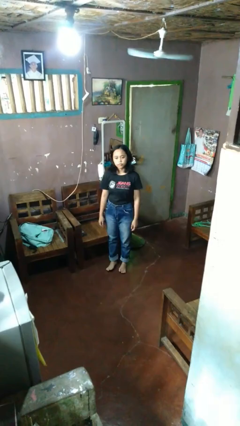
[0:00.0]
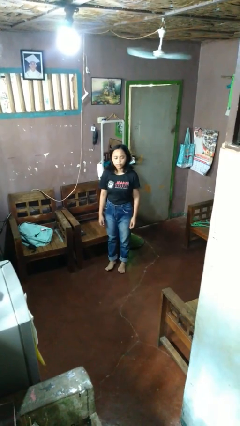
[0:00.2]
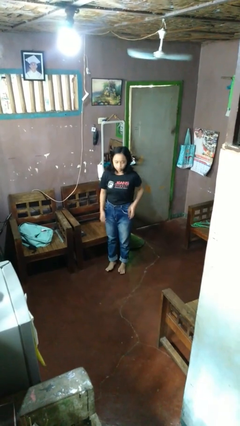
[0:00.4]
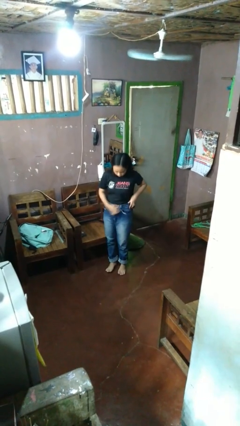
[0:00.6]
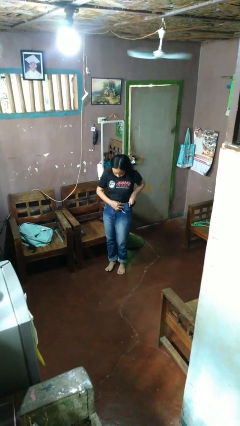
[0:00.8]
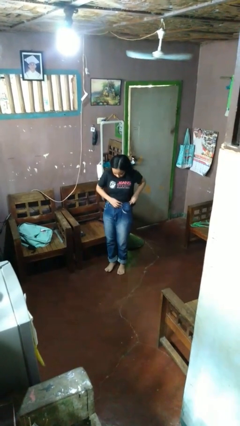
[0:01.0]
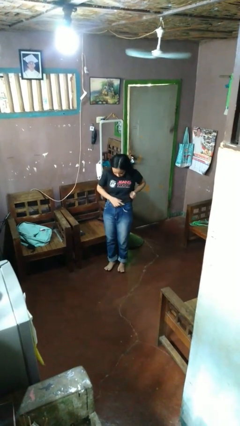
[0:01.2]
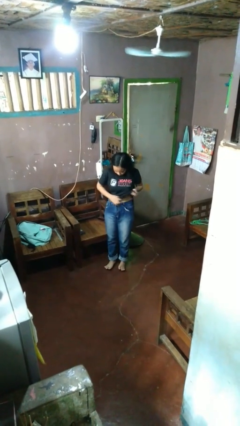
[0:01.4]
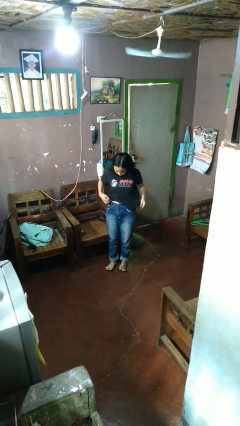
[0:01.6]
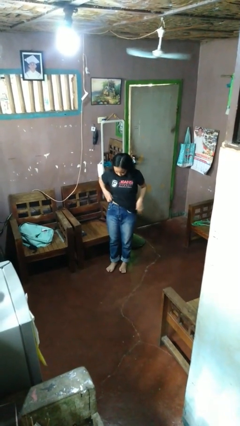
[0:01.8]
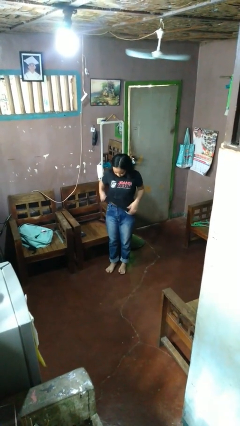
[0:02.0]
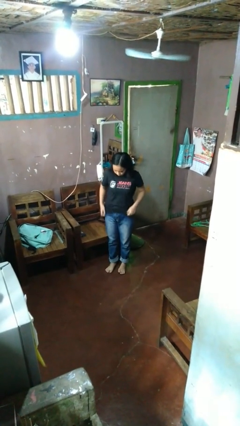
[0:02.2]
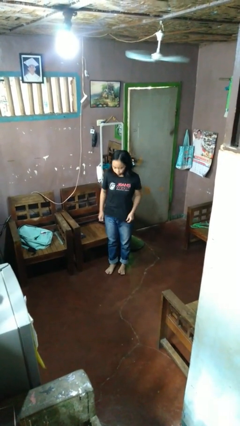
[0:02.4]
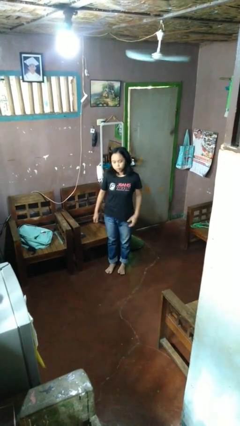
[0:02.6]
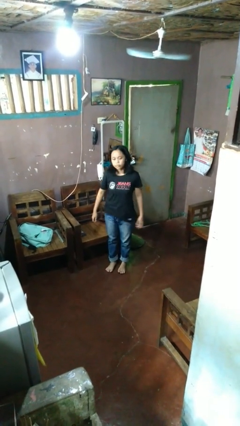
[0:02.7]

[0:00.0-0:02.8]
person untucks shirt

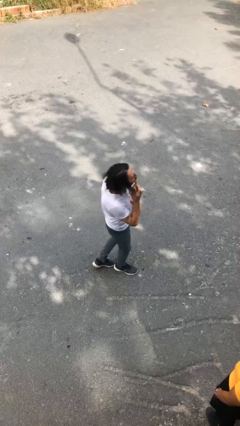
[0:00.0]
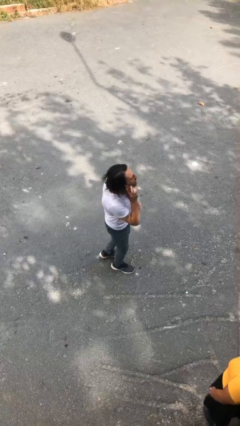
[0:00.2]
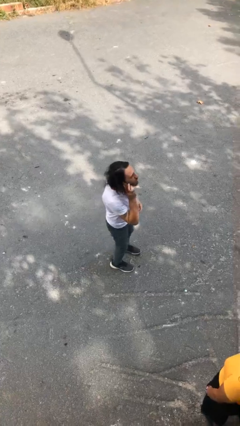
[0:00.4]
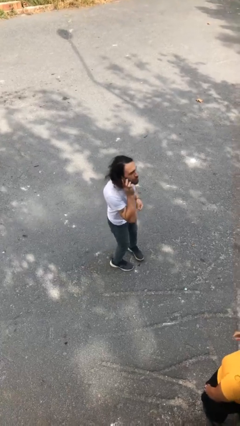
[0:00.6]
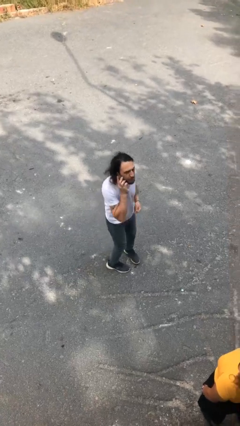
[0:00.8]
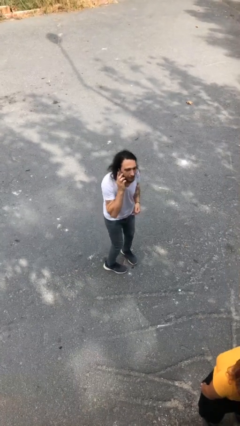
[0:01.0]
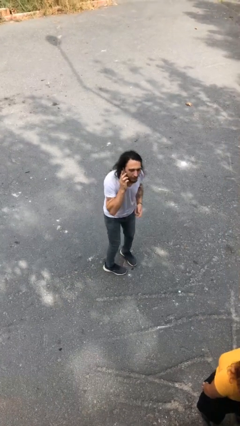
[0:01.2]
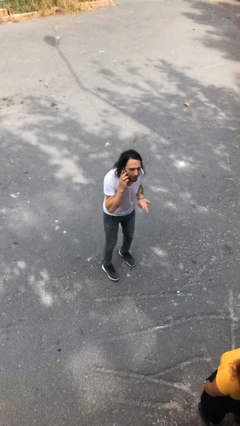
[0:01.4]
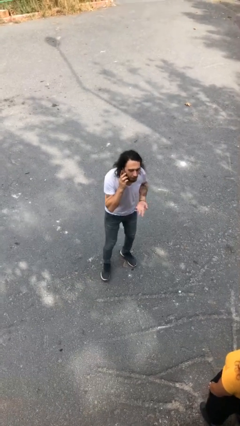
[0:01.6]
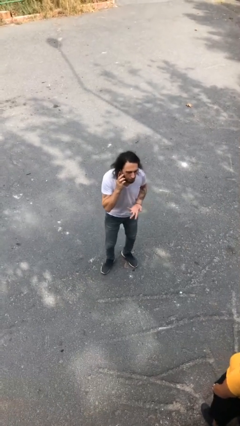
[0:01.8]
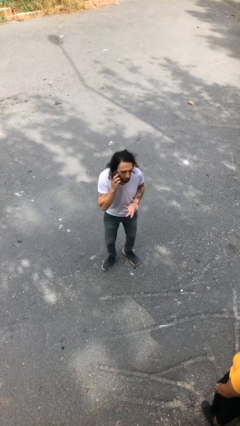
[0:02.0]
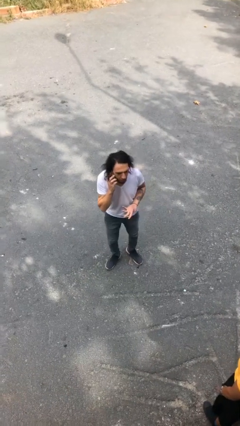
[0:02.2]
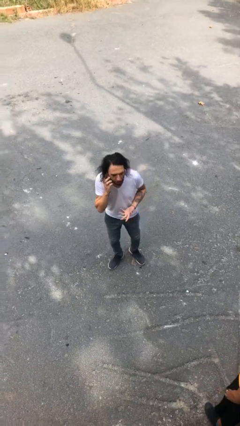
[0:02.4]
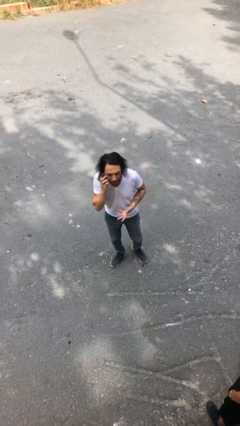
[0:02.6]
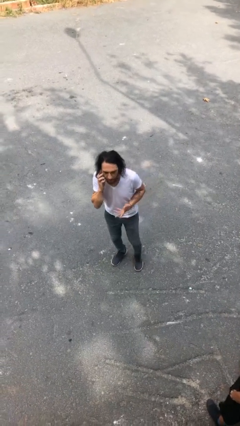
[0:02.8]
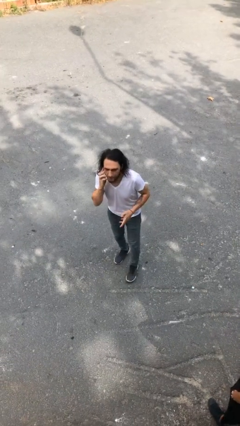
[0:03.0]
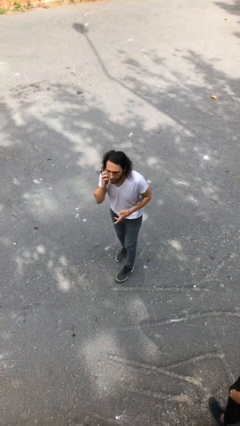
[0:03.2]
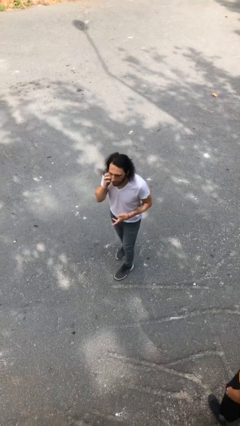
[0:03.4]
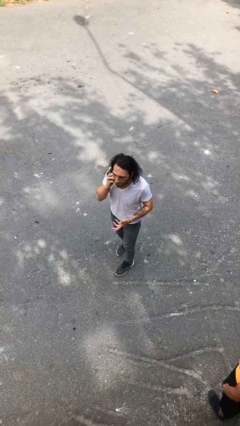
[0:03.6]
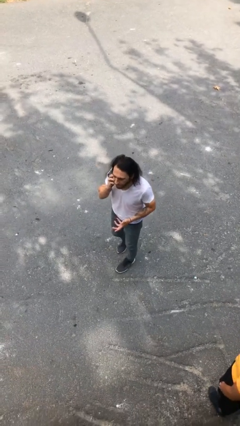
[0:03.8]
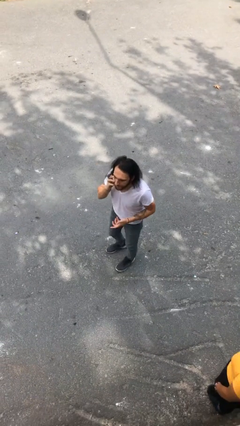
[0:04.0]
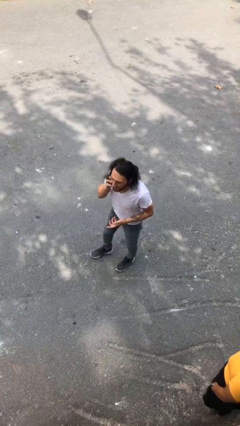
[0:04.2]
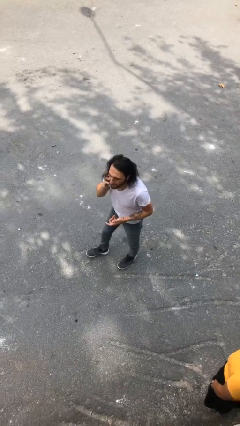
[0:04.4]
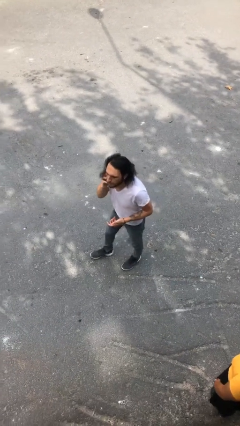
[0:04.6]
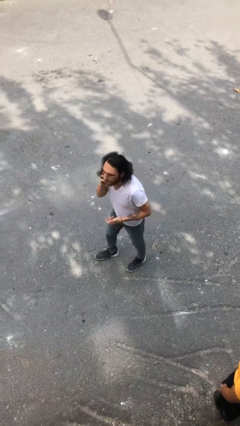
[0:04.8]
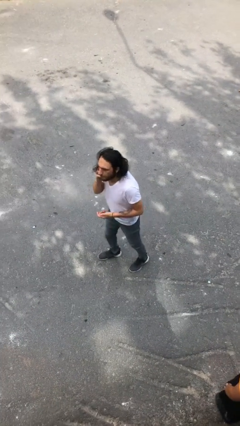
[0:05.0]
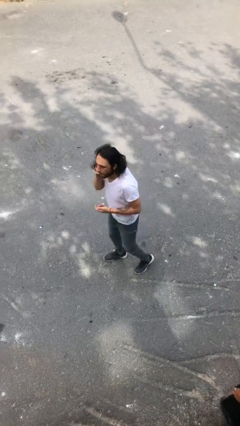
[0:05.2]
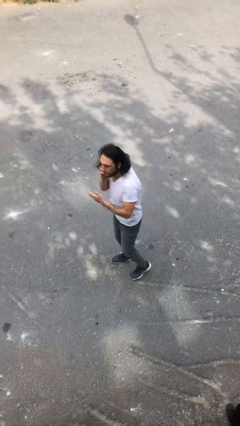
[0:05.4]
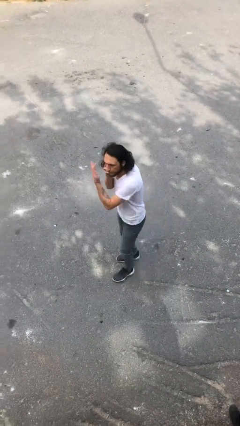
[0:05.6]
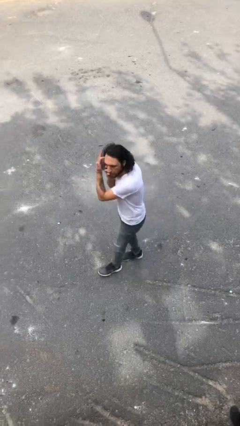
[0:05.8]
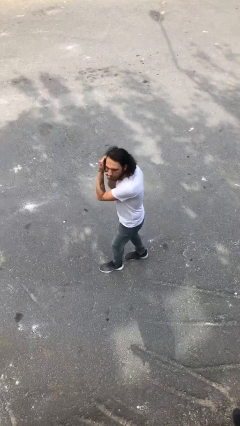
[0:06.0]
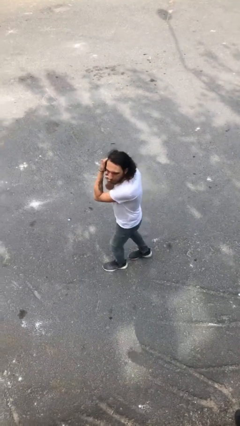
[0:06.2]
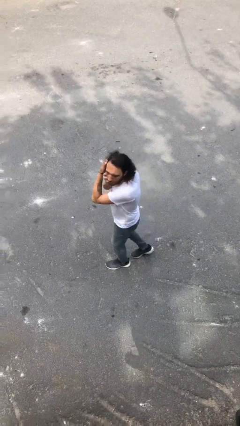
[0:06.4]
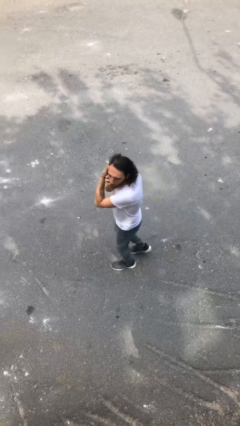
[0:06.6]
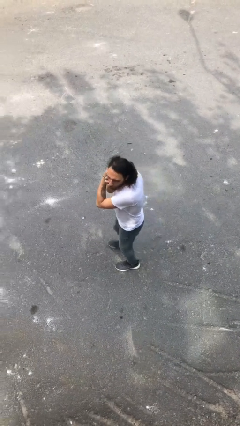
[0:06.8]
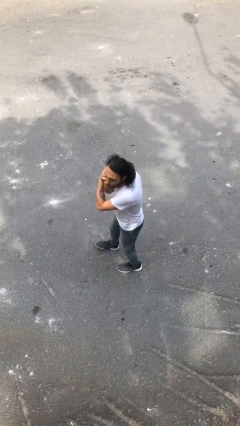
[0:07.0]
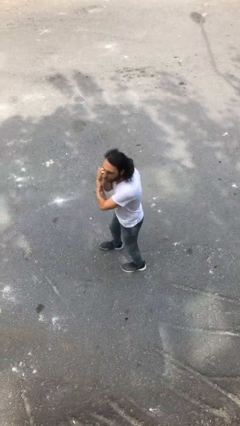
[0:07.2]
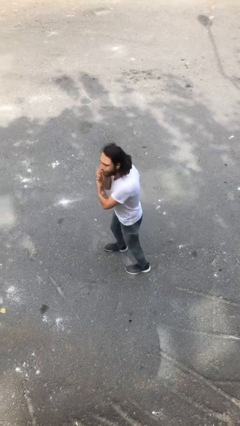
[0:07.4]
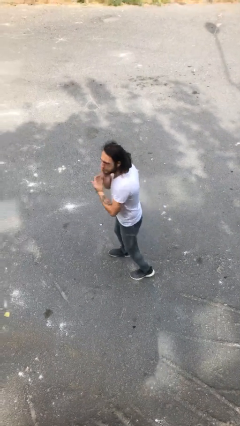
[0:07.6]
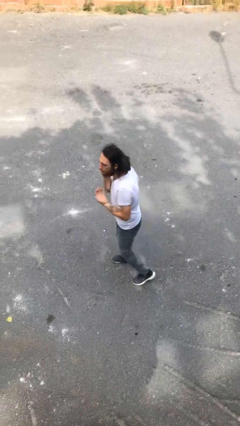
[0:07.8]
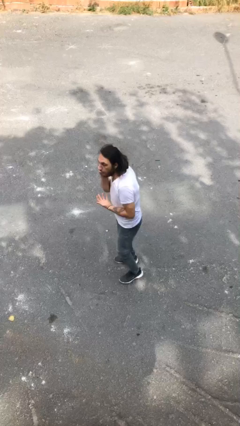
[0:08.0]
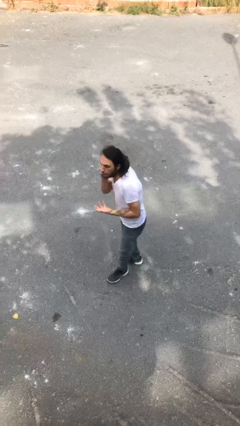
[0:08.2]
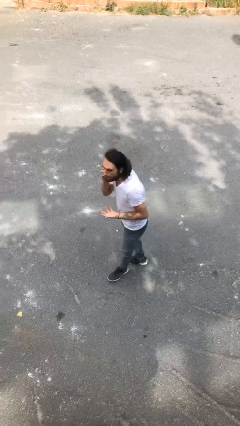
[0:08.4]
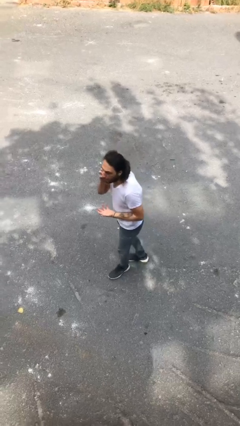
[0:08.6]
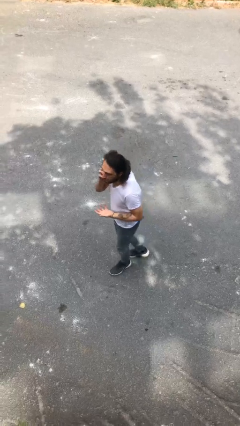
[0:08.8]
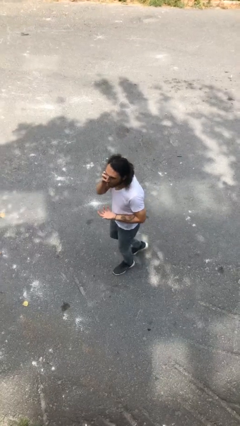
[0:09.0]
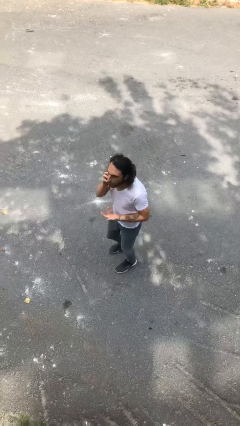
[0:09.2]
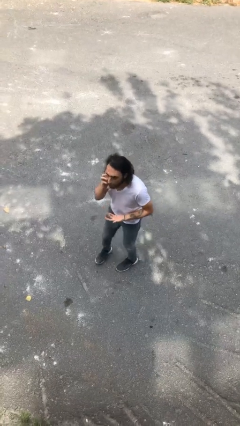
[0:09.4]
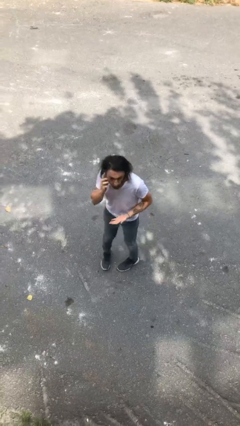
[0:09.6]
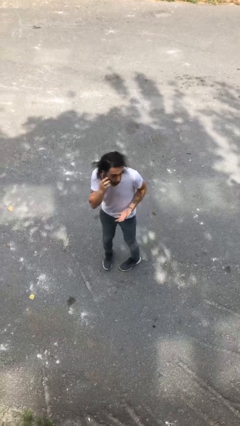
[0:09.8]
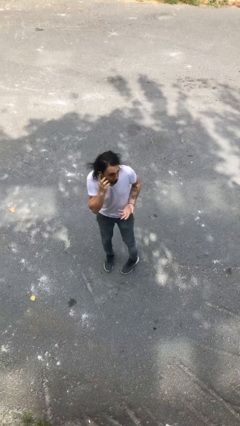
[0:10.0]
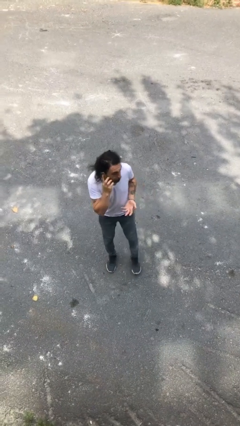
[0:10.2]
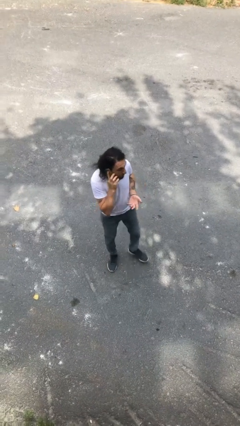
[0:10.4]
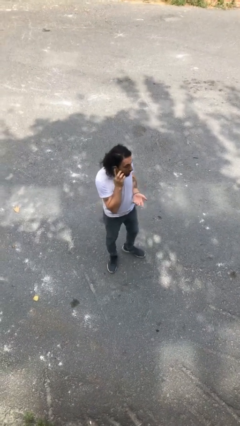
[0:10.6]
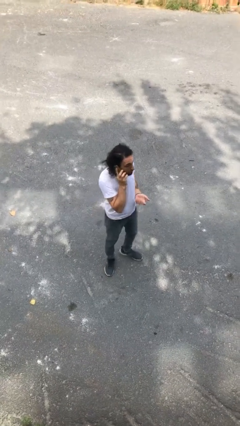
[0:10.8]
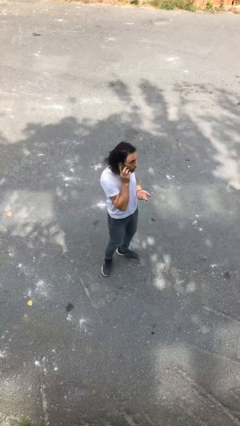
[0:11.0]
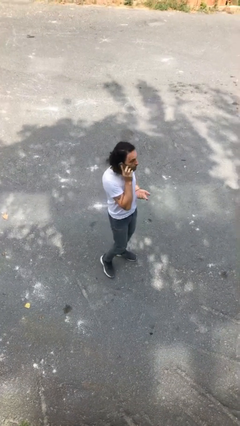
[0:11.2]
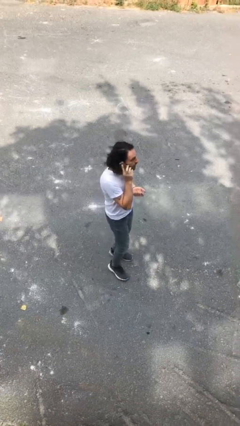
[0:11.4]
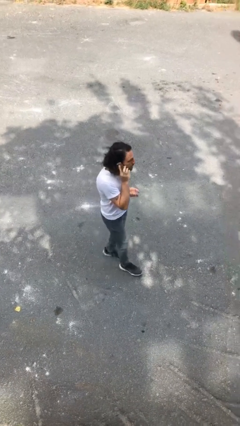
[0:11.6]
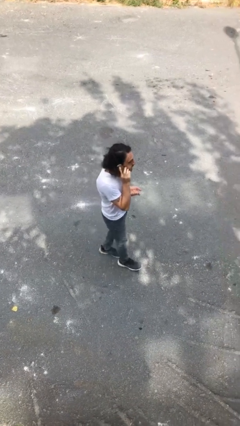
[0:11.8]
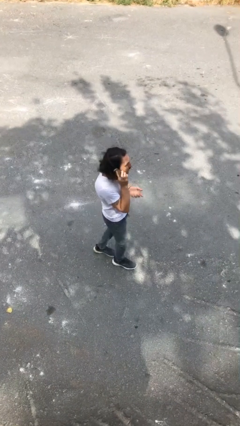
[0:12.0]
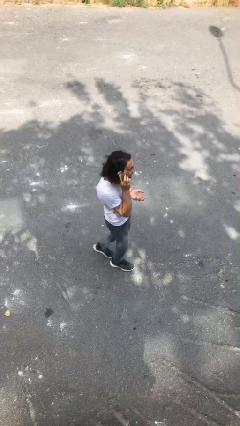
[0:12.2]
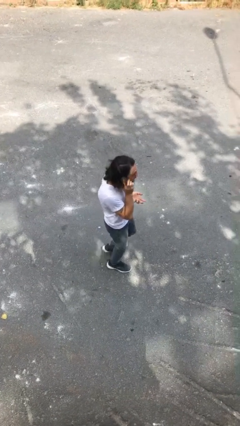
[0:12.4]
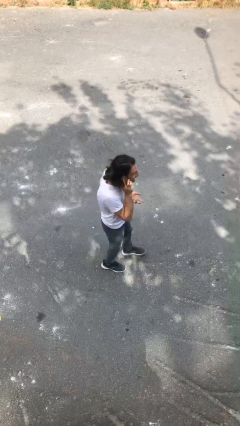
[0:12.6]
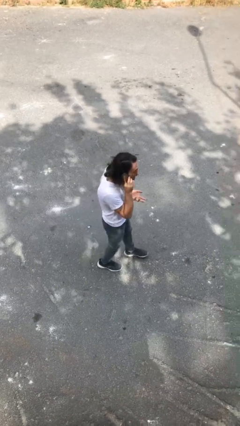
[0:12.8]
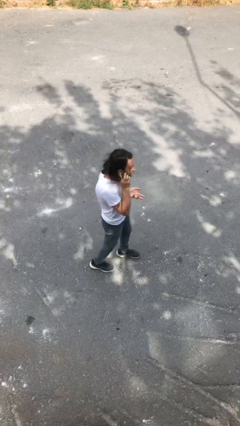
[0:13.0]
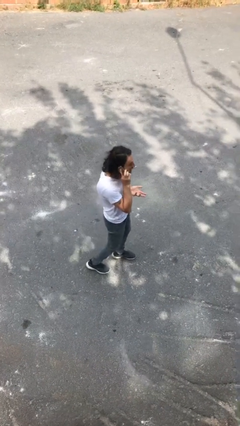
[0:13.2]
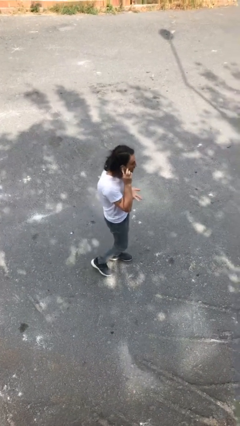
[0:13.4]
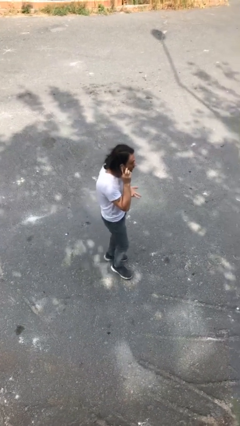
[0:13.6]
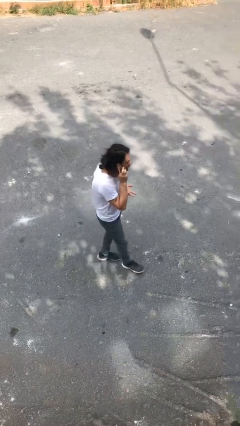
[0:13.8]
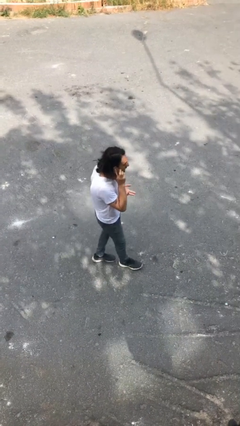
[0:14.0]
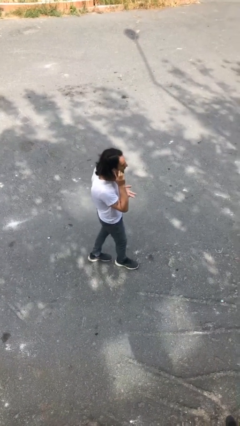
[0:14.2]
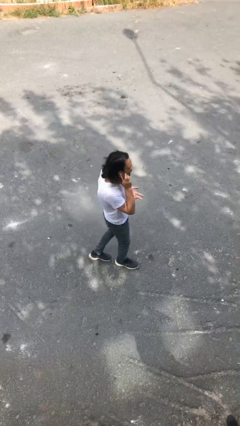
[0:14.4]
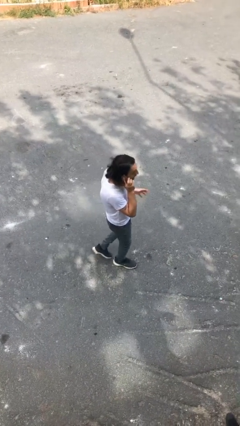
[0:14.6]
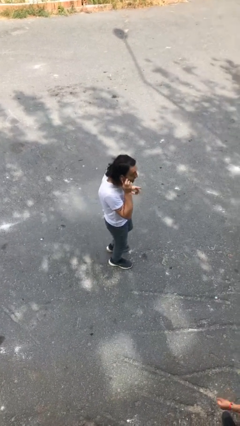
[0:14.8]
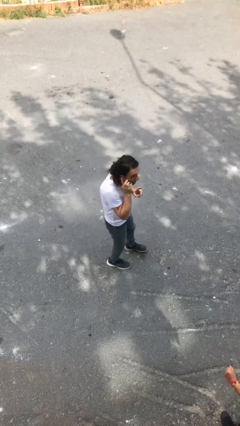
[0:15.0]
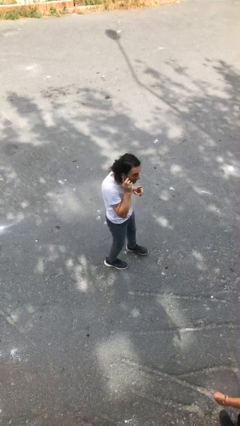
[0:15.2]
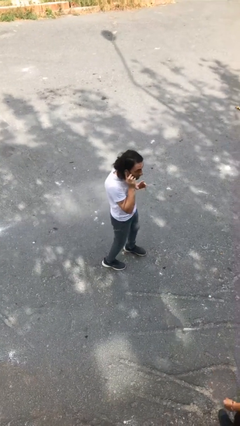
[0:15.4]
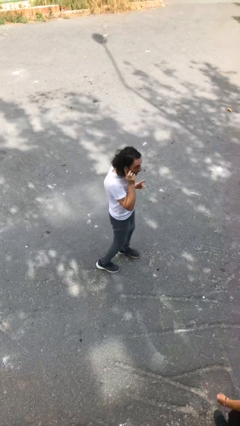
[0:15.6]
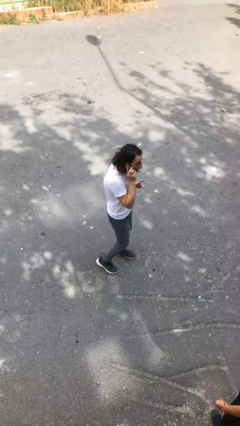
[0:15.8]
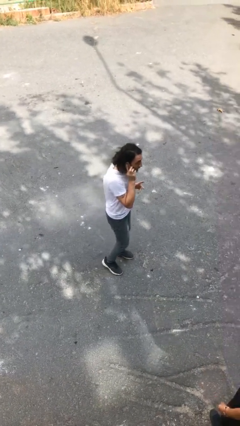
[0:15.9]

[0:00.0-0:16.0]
person talks on phone
